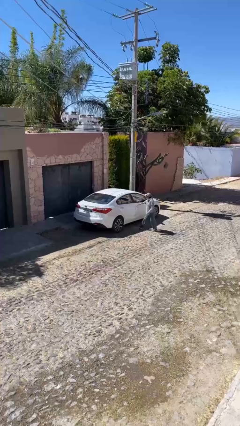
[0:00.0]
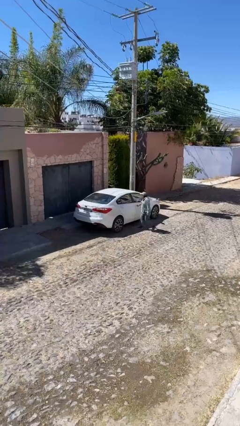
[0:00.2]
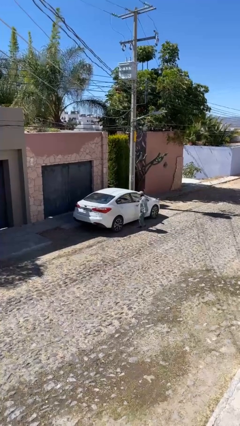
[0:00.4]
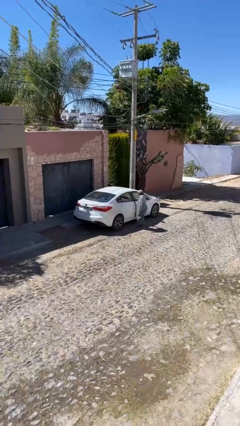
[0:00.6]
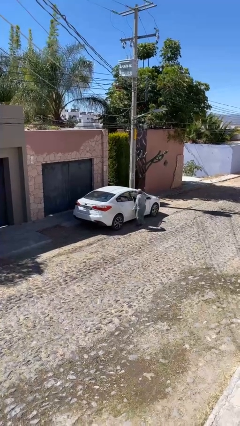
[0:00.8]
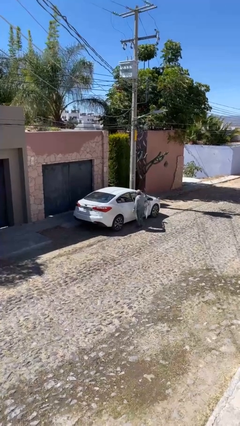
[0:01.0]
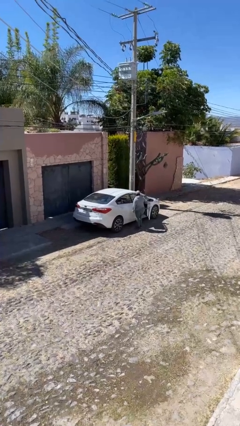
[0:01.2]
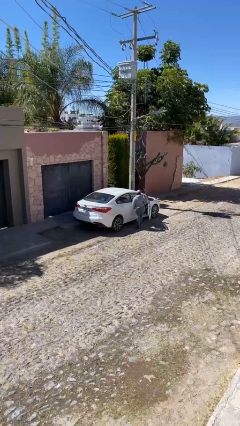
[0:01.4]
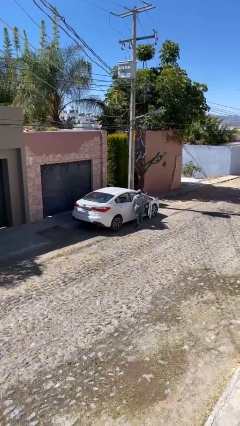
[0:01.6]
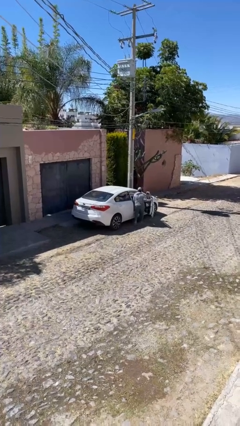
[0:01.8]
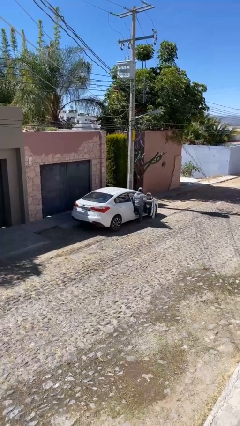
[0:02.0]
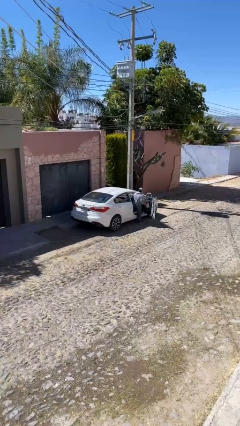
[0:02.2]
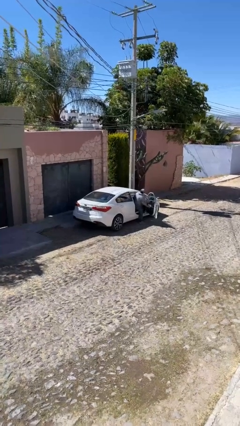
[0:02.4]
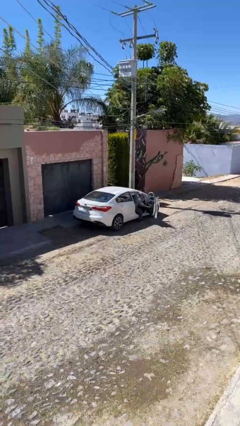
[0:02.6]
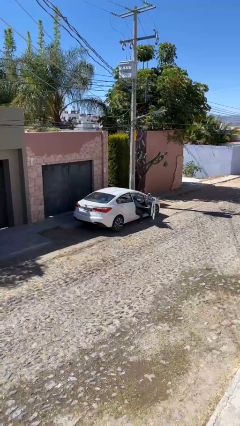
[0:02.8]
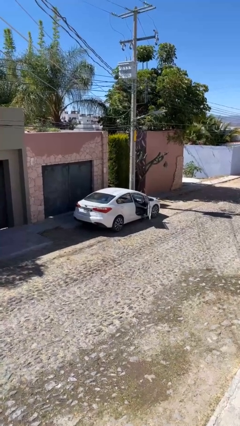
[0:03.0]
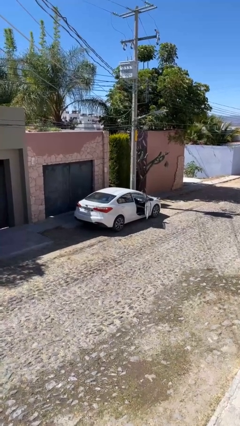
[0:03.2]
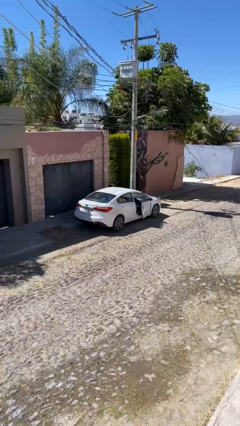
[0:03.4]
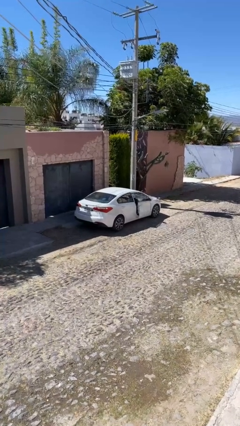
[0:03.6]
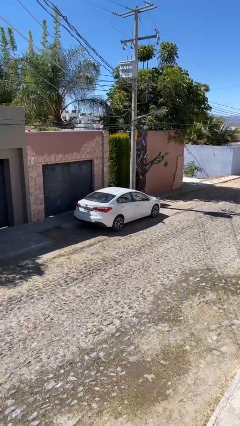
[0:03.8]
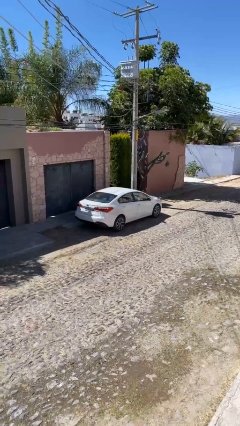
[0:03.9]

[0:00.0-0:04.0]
car picks up person

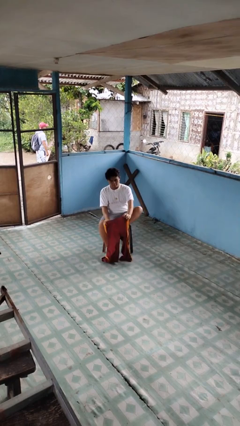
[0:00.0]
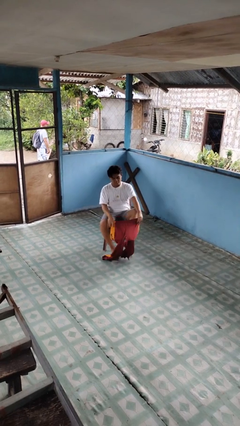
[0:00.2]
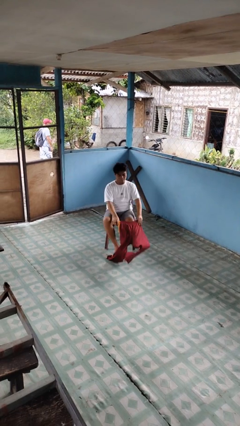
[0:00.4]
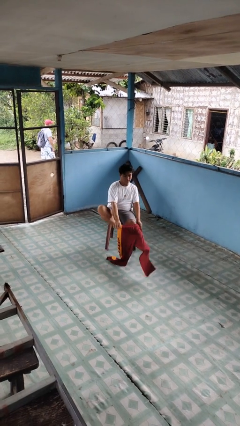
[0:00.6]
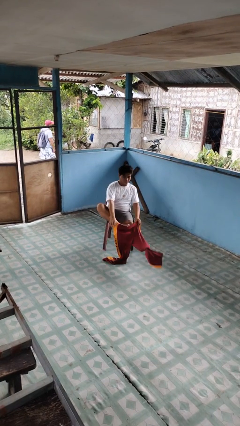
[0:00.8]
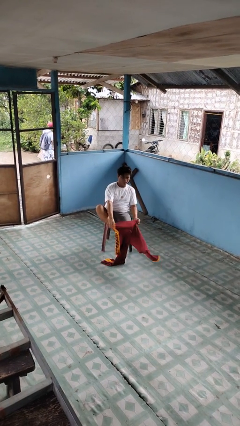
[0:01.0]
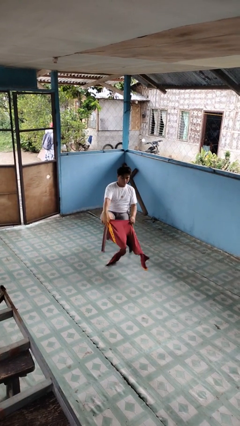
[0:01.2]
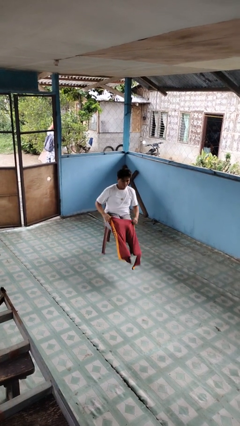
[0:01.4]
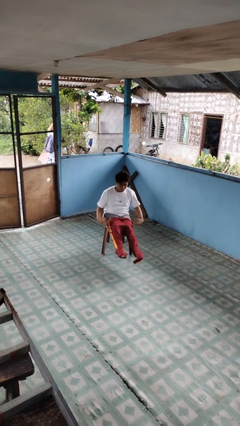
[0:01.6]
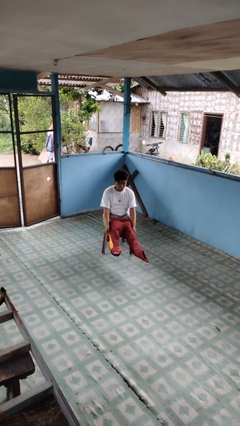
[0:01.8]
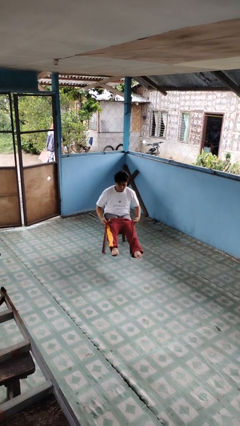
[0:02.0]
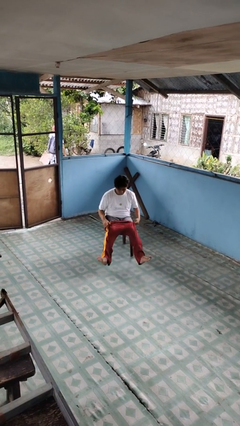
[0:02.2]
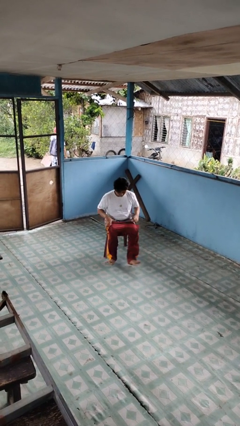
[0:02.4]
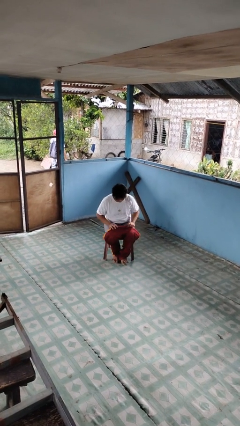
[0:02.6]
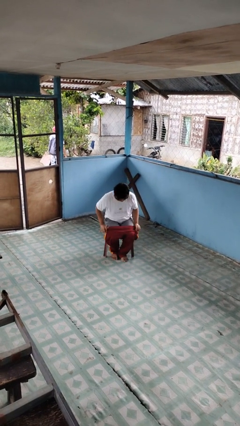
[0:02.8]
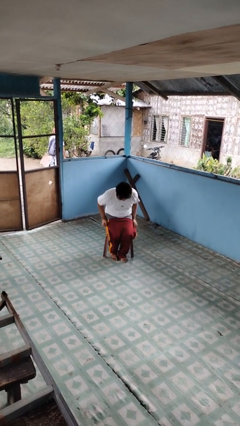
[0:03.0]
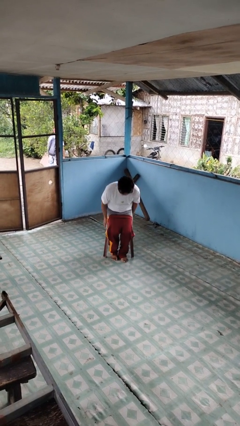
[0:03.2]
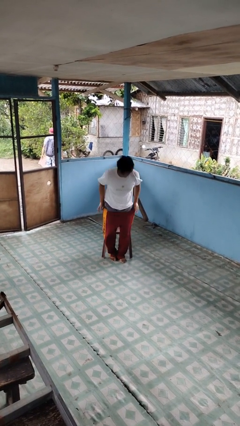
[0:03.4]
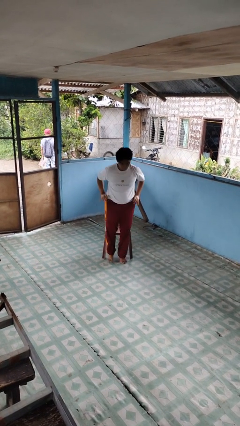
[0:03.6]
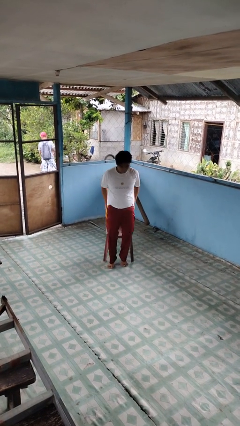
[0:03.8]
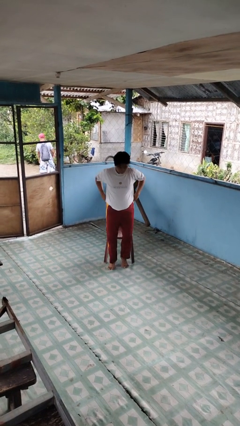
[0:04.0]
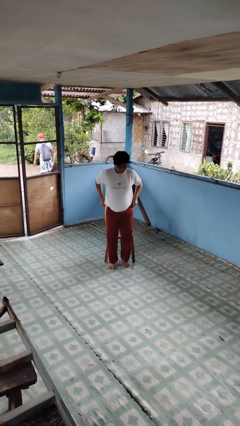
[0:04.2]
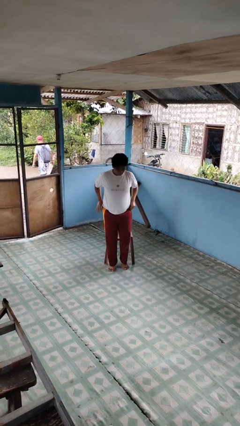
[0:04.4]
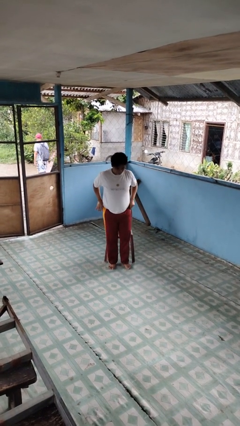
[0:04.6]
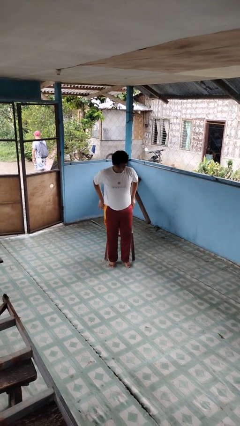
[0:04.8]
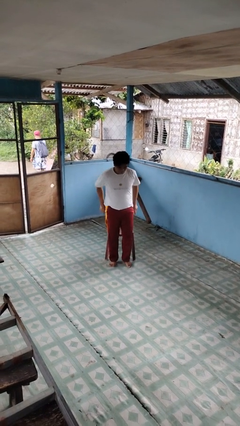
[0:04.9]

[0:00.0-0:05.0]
person puts on pants

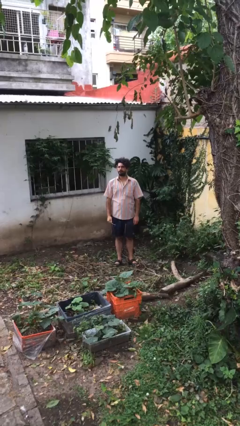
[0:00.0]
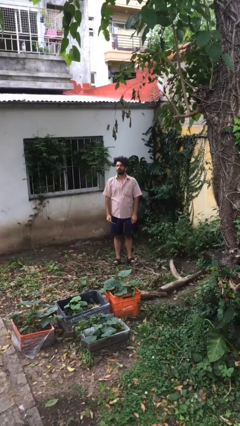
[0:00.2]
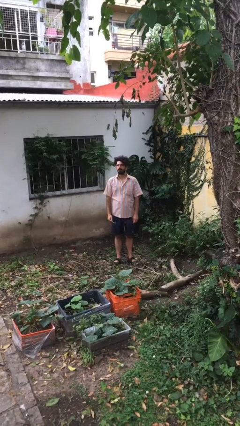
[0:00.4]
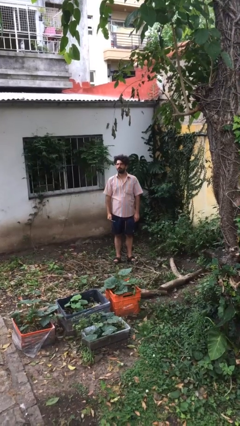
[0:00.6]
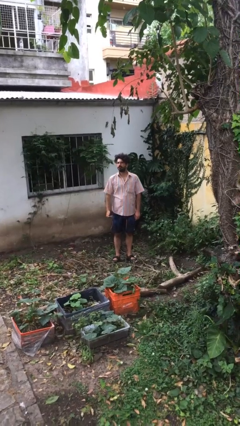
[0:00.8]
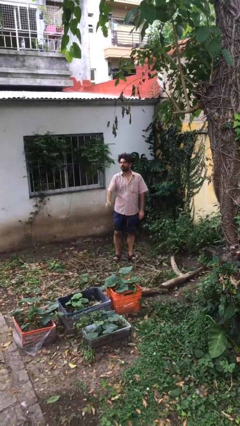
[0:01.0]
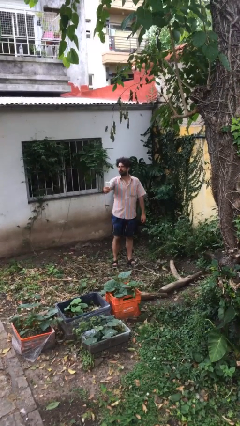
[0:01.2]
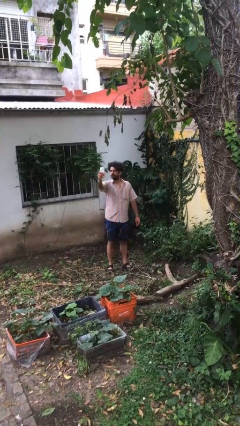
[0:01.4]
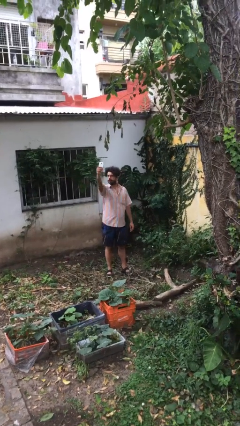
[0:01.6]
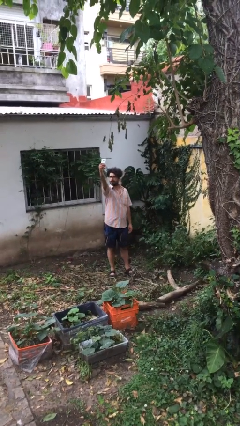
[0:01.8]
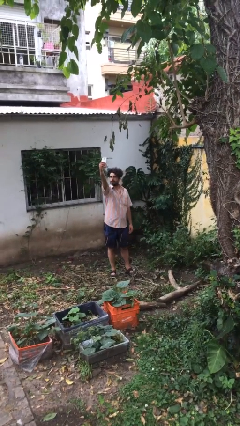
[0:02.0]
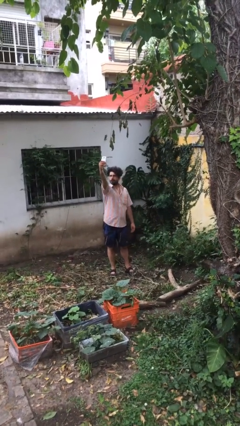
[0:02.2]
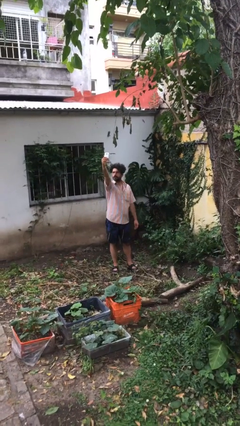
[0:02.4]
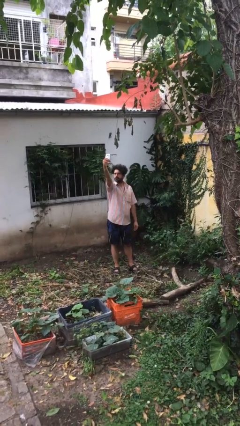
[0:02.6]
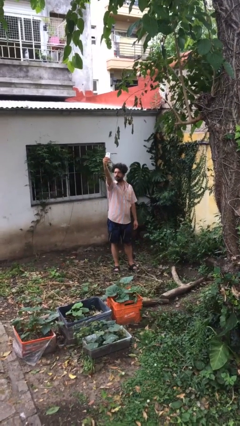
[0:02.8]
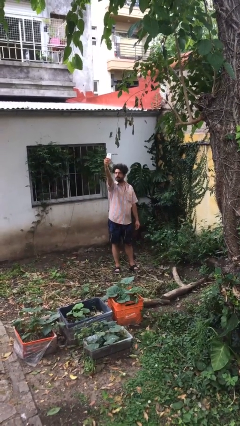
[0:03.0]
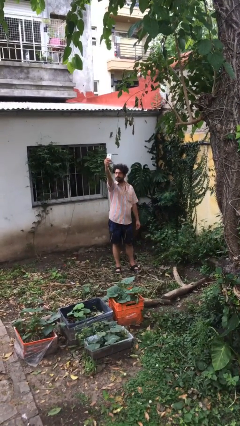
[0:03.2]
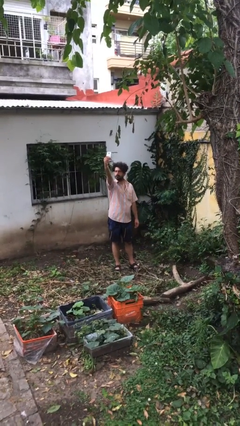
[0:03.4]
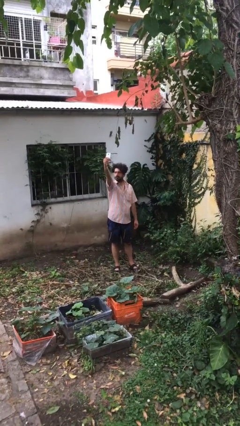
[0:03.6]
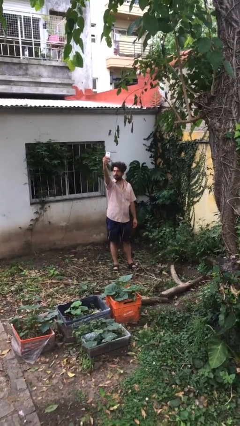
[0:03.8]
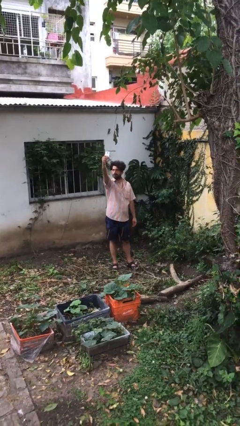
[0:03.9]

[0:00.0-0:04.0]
person takes selfie

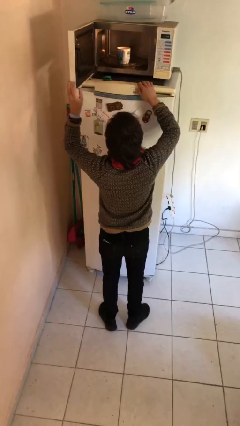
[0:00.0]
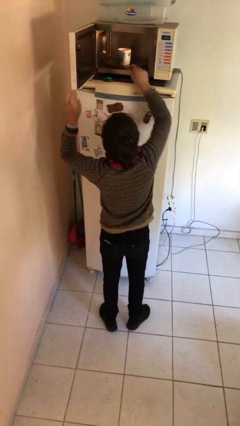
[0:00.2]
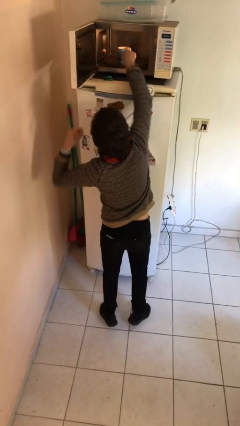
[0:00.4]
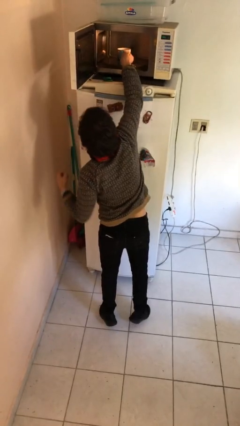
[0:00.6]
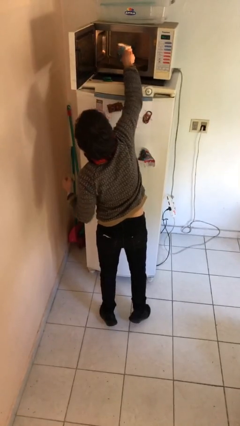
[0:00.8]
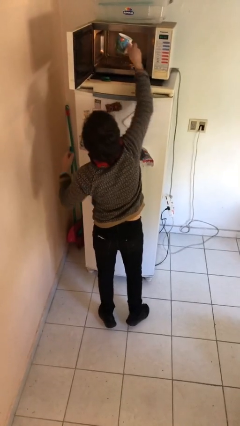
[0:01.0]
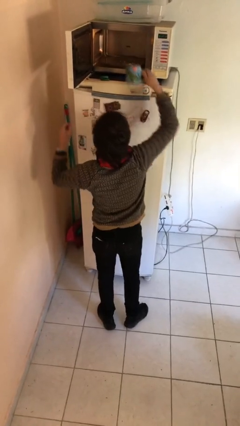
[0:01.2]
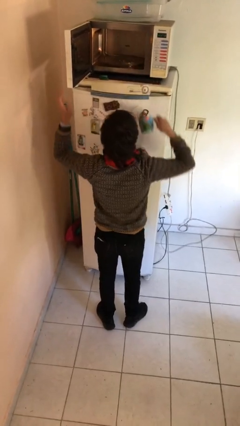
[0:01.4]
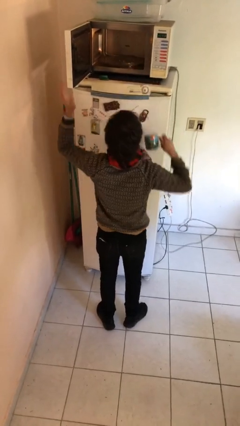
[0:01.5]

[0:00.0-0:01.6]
person takes object from microwave

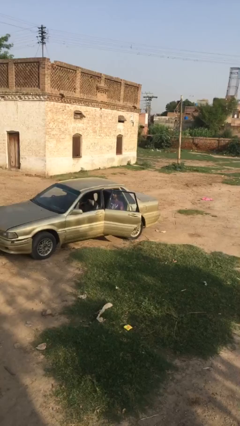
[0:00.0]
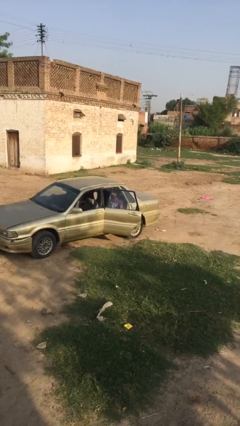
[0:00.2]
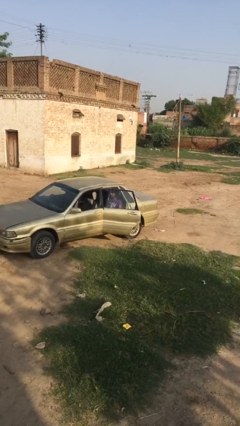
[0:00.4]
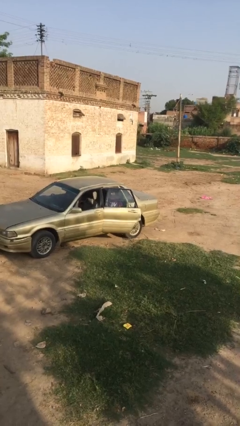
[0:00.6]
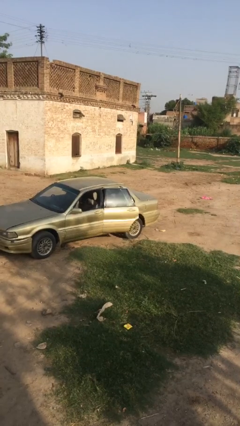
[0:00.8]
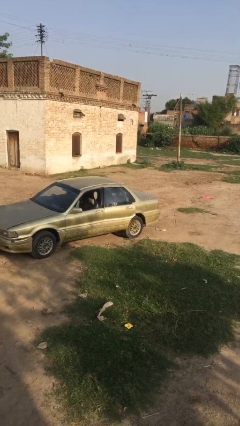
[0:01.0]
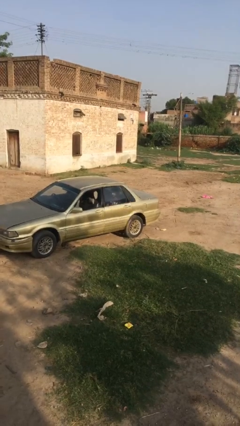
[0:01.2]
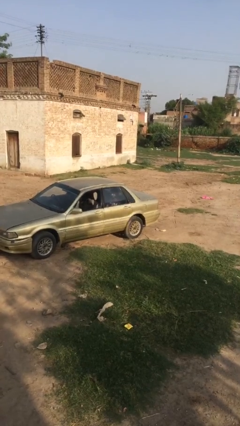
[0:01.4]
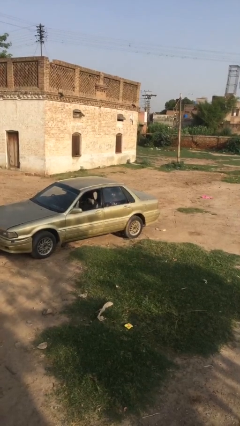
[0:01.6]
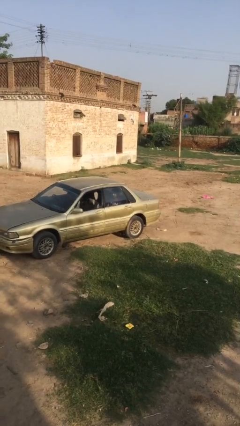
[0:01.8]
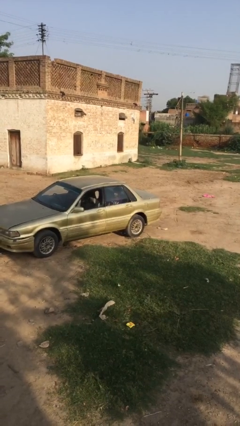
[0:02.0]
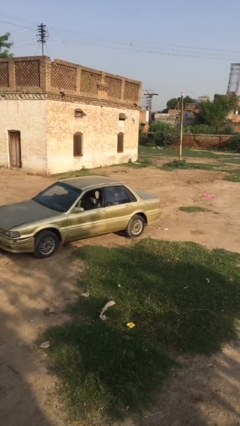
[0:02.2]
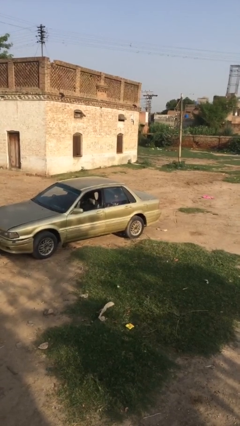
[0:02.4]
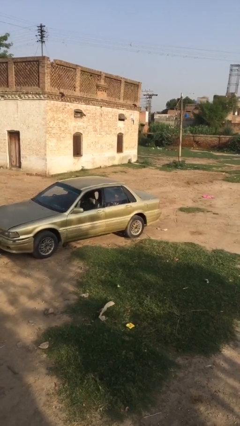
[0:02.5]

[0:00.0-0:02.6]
person closes car door
